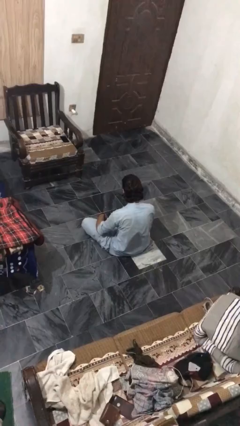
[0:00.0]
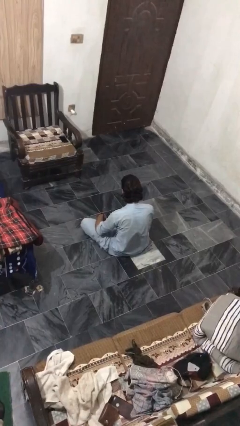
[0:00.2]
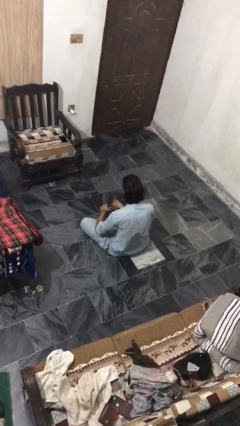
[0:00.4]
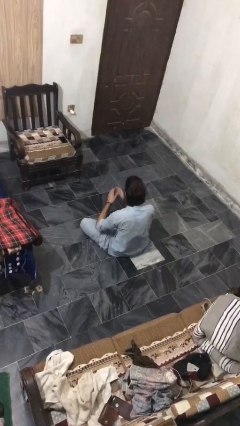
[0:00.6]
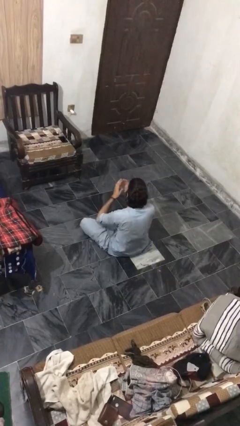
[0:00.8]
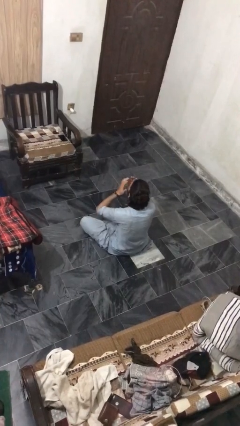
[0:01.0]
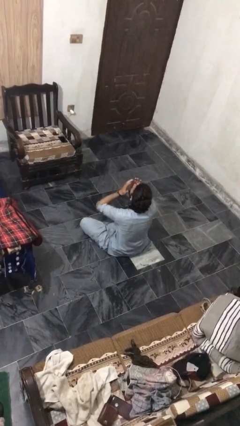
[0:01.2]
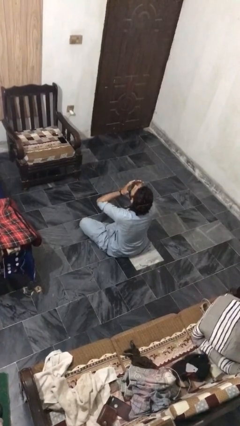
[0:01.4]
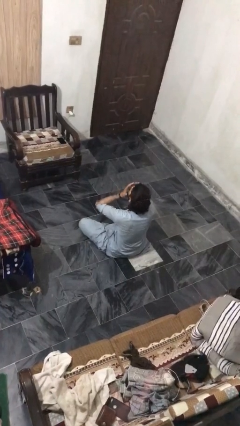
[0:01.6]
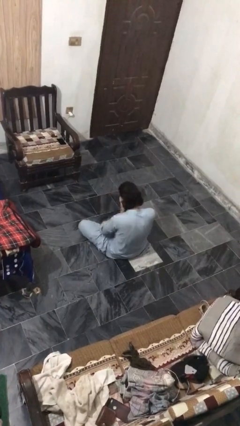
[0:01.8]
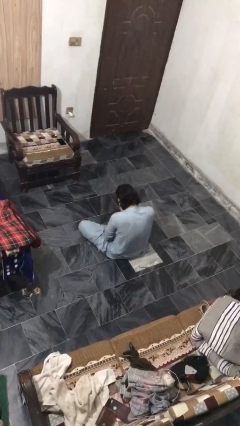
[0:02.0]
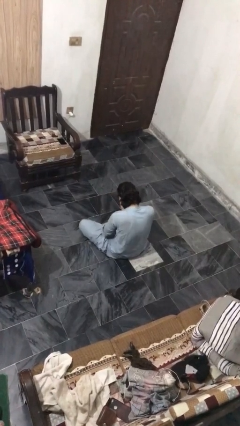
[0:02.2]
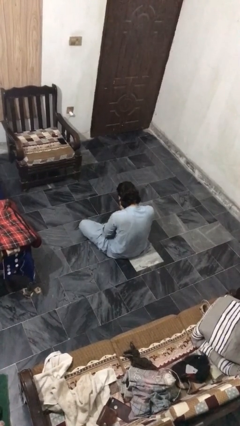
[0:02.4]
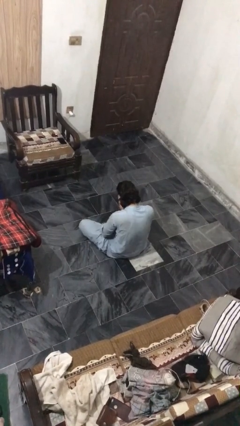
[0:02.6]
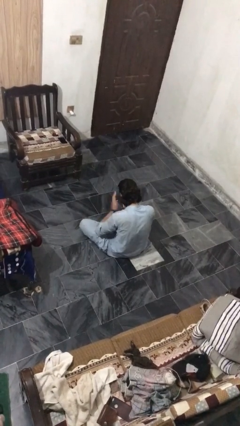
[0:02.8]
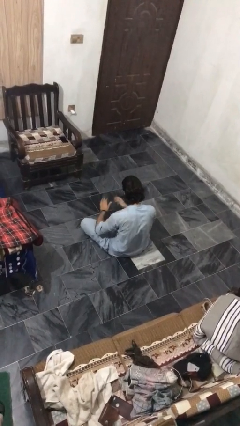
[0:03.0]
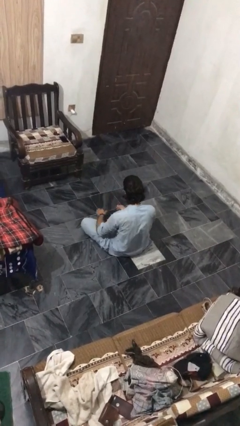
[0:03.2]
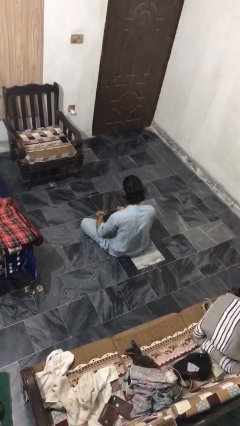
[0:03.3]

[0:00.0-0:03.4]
person sneezes into hand

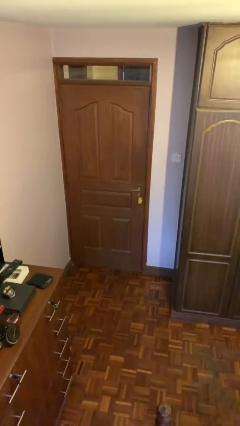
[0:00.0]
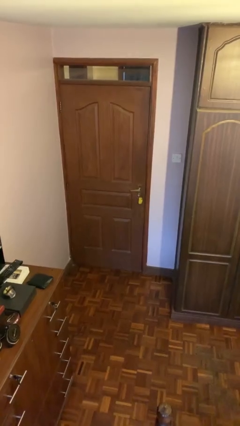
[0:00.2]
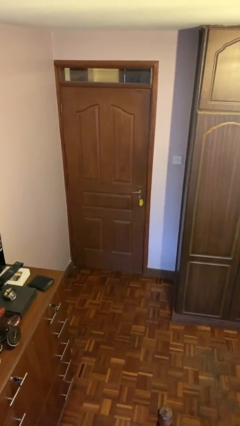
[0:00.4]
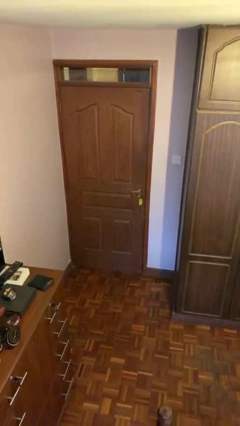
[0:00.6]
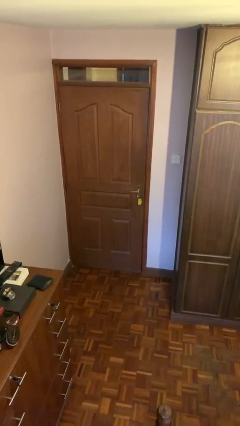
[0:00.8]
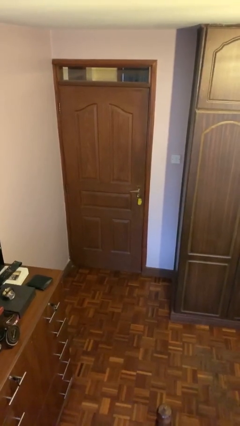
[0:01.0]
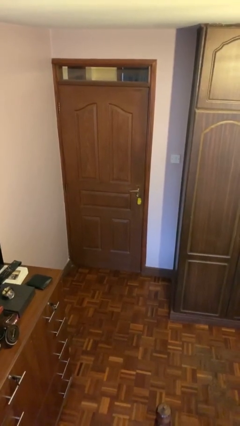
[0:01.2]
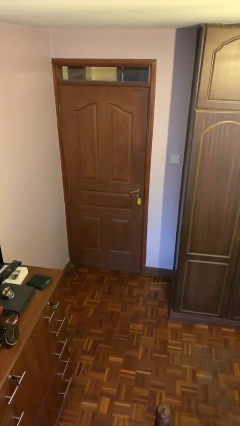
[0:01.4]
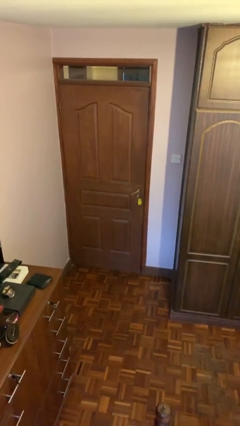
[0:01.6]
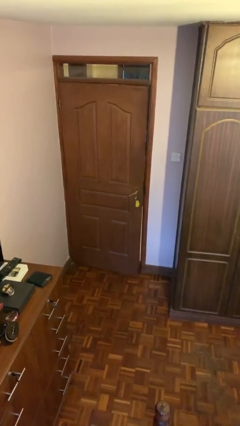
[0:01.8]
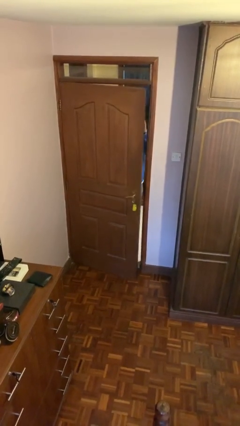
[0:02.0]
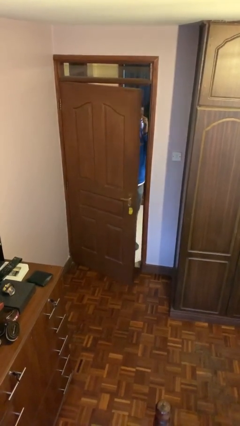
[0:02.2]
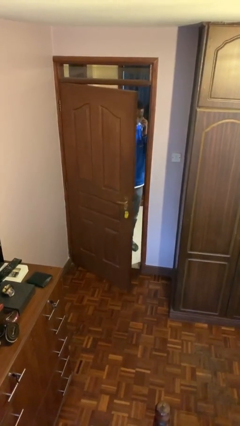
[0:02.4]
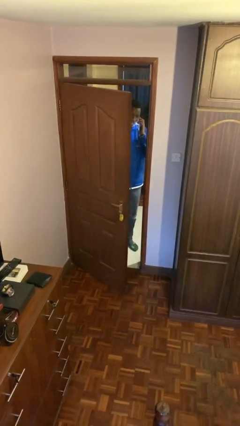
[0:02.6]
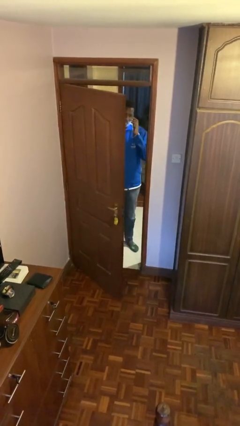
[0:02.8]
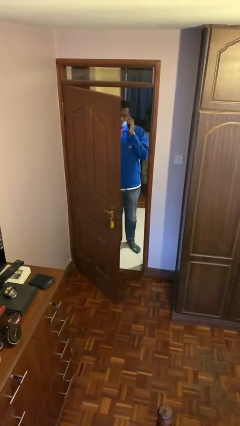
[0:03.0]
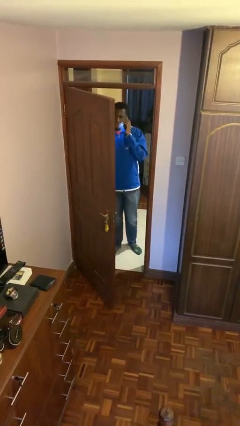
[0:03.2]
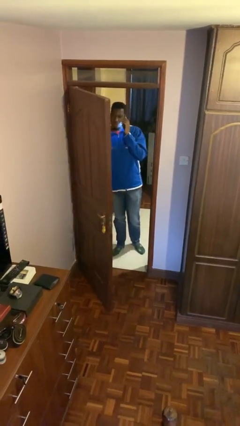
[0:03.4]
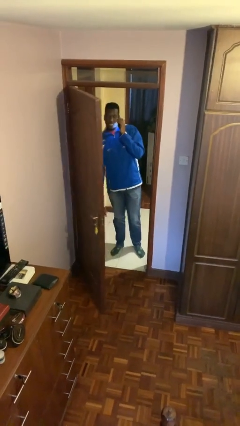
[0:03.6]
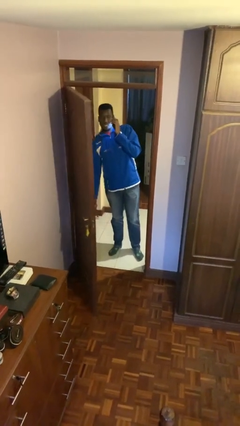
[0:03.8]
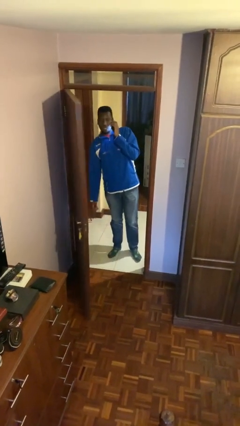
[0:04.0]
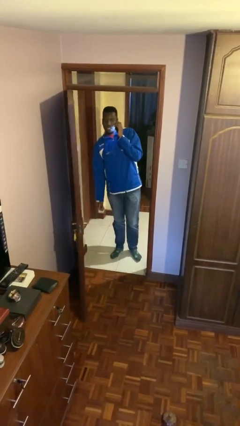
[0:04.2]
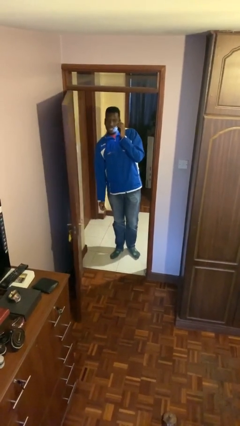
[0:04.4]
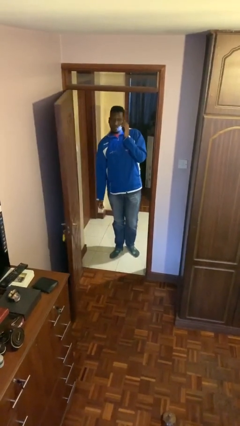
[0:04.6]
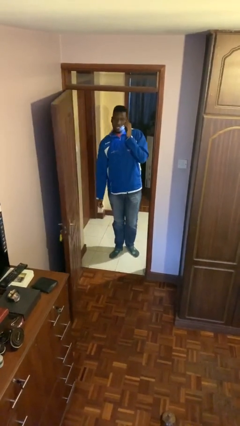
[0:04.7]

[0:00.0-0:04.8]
person opens facility door

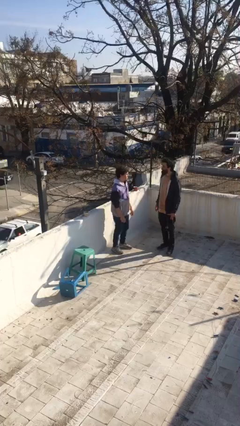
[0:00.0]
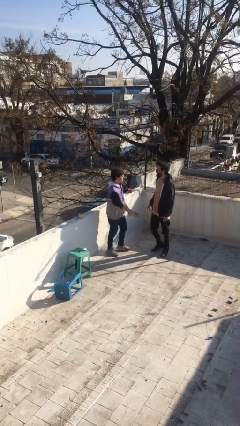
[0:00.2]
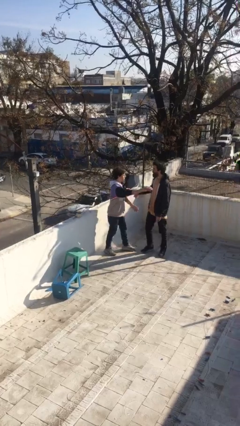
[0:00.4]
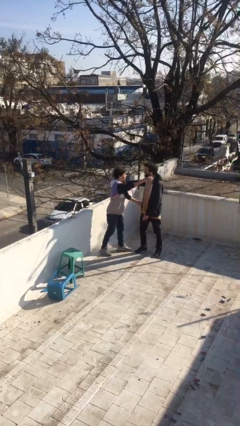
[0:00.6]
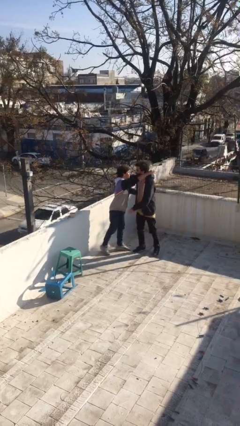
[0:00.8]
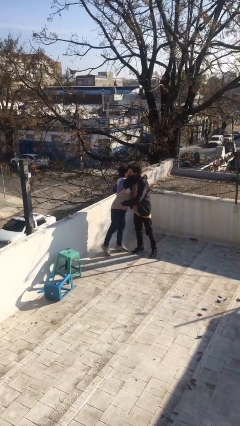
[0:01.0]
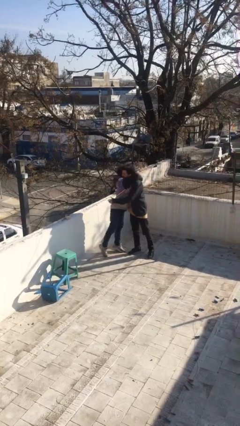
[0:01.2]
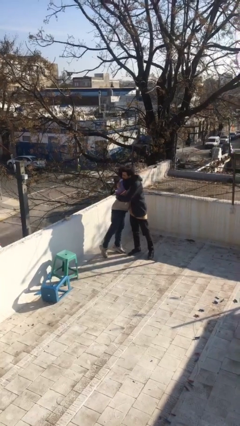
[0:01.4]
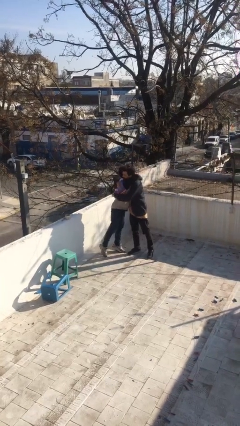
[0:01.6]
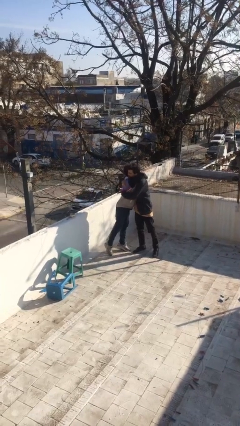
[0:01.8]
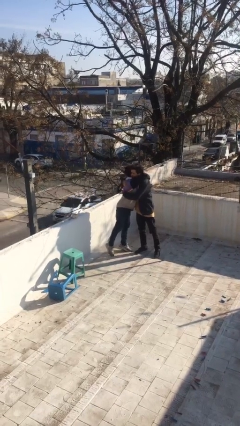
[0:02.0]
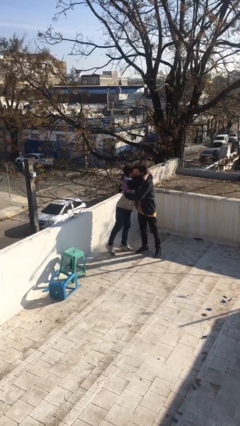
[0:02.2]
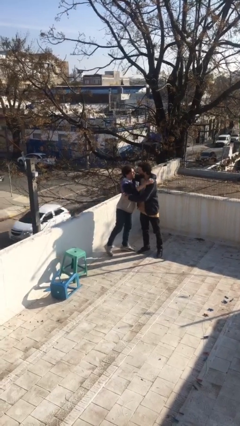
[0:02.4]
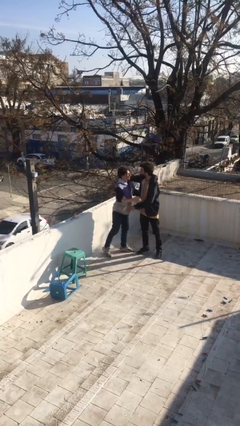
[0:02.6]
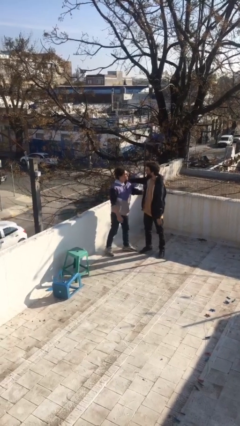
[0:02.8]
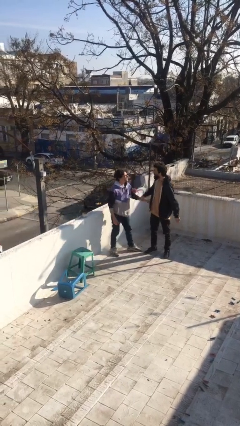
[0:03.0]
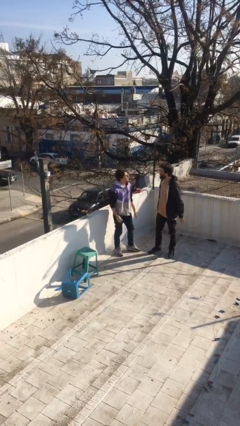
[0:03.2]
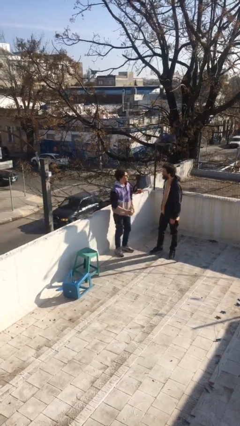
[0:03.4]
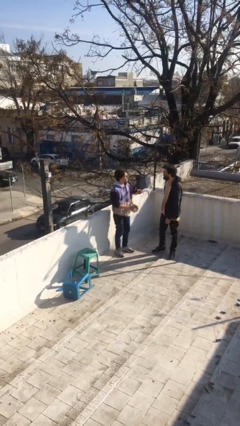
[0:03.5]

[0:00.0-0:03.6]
person embraces person

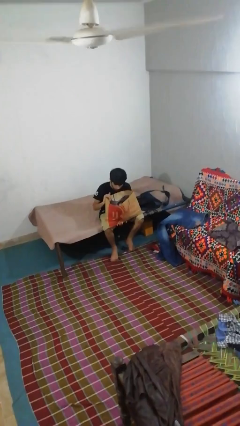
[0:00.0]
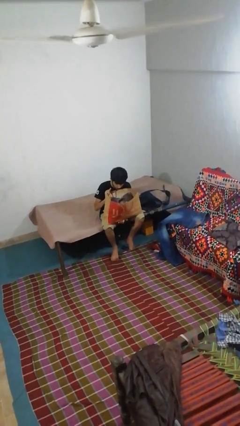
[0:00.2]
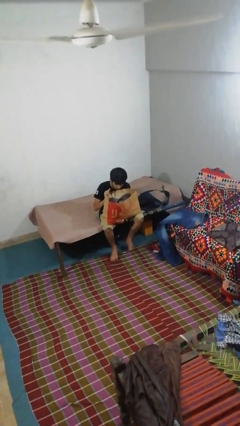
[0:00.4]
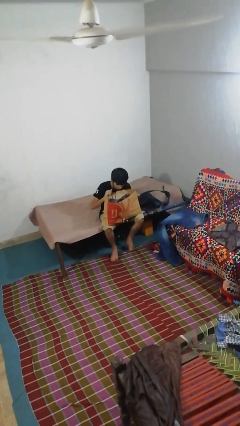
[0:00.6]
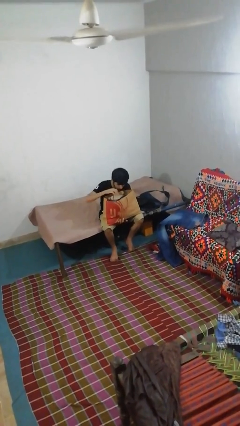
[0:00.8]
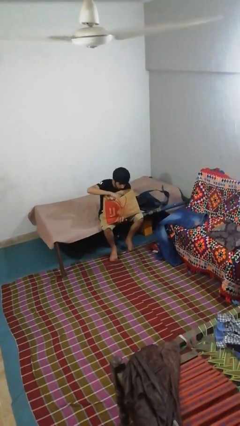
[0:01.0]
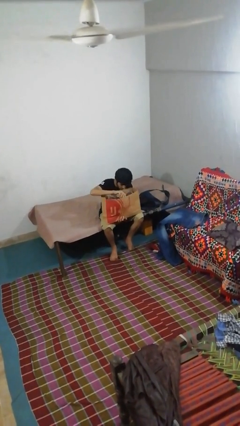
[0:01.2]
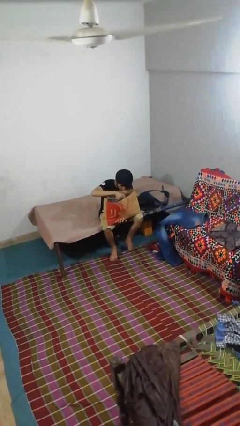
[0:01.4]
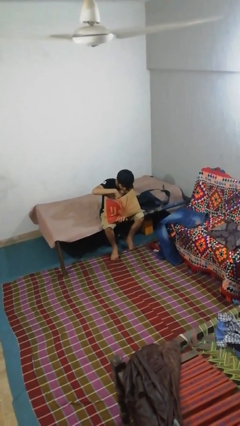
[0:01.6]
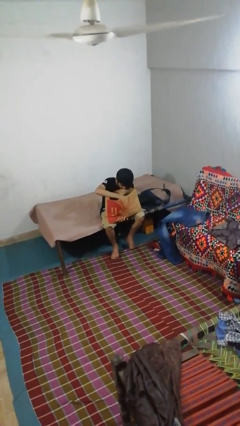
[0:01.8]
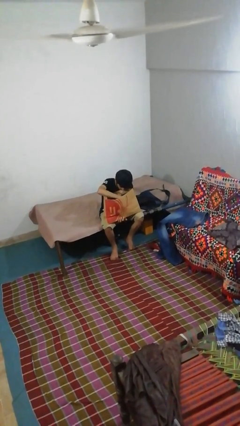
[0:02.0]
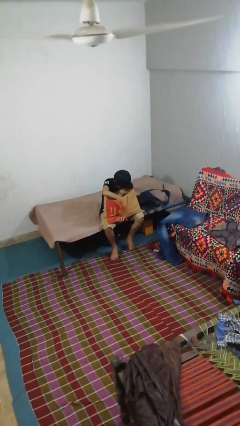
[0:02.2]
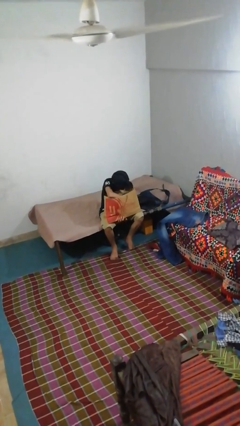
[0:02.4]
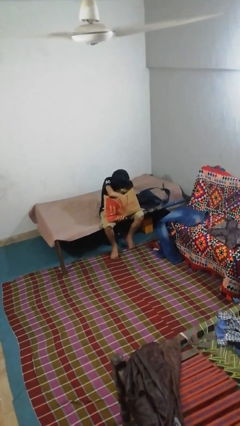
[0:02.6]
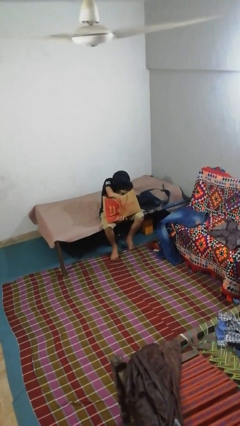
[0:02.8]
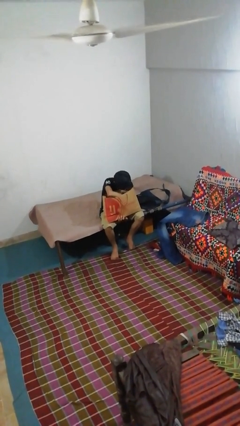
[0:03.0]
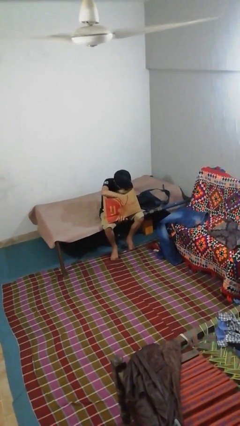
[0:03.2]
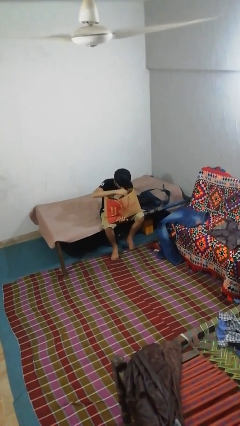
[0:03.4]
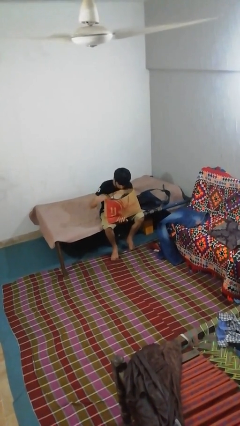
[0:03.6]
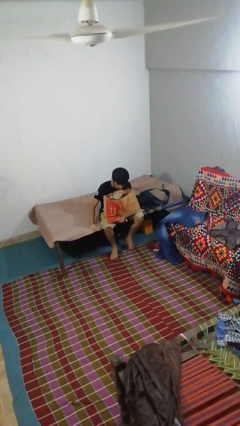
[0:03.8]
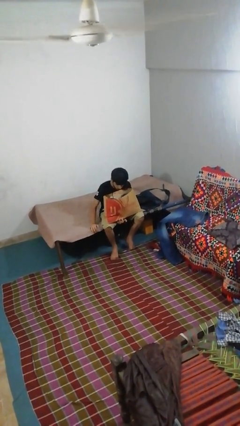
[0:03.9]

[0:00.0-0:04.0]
person searches in bag

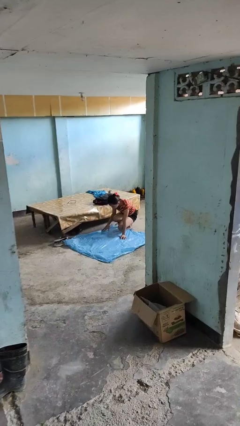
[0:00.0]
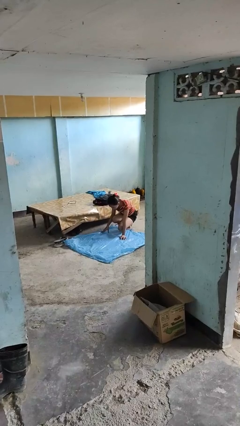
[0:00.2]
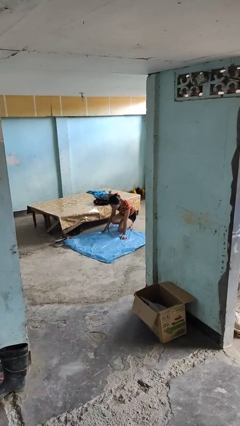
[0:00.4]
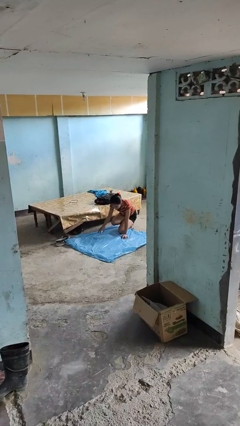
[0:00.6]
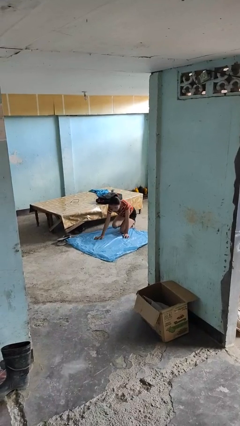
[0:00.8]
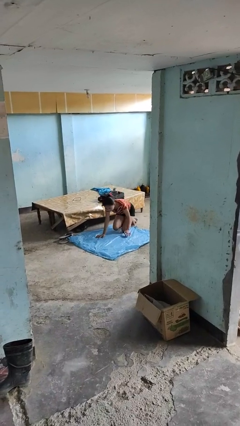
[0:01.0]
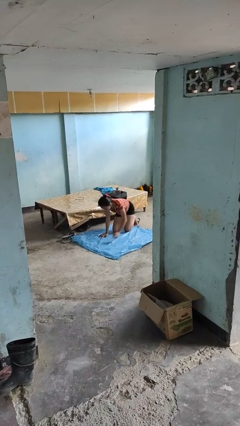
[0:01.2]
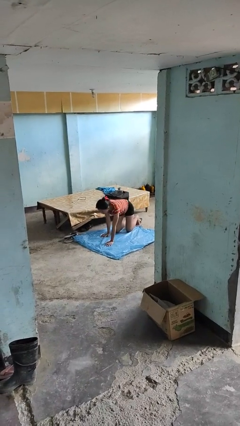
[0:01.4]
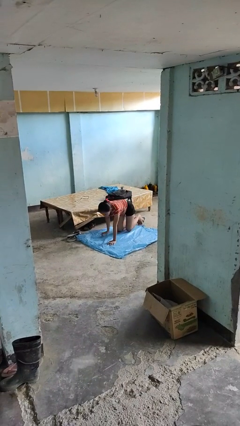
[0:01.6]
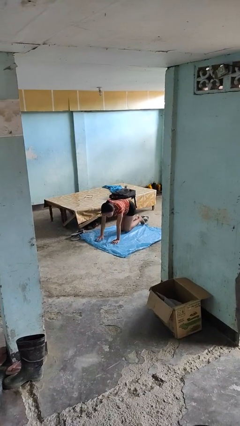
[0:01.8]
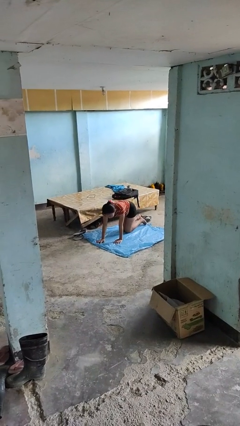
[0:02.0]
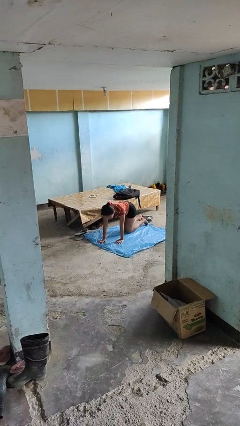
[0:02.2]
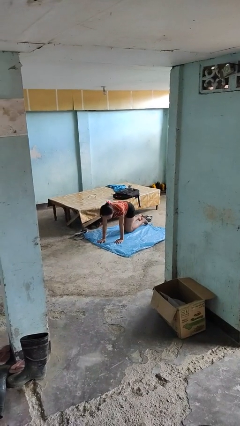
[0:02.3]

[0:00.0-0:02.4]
person crawls
